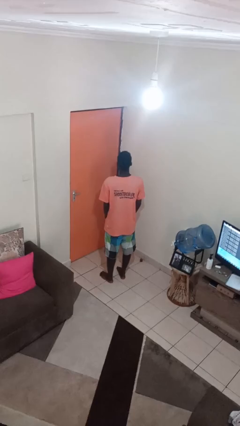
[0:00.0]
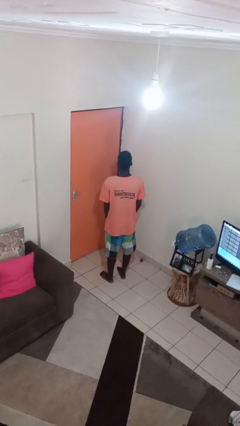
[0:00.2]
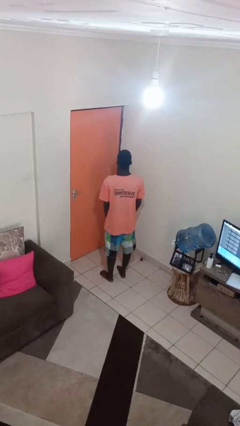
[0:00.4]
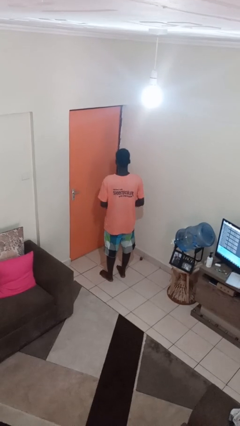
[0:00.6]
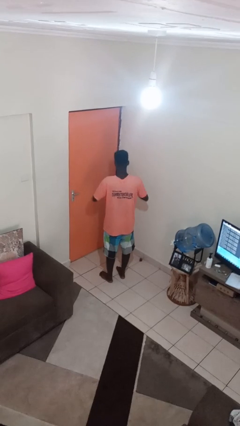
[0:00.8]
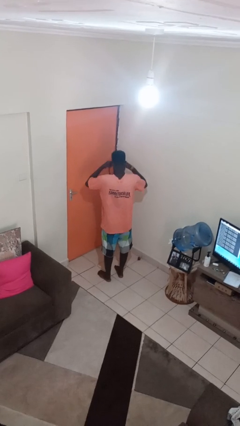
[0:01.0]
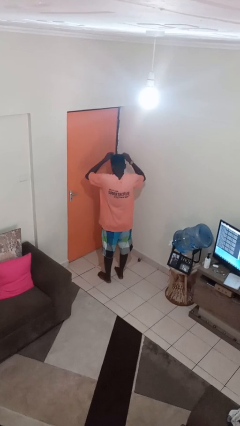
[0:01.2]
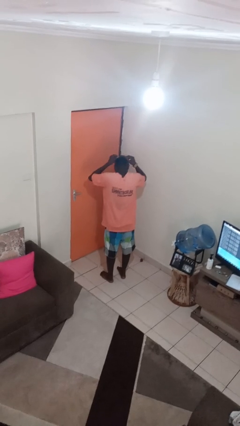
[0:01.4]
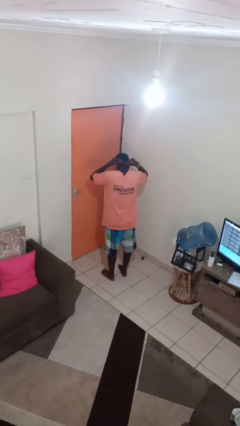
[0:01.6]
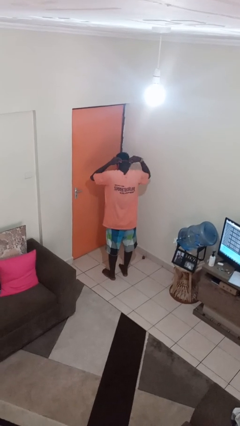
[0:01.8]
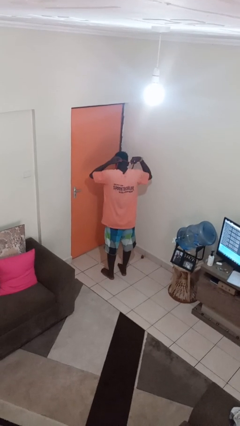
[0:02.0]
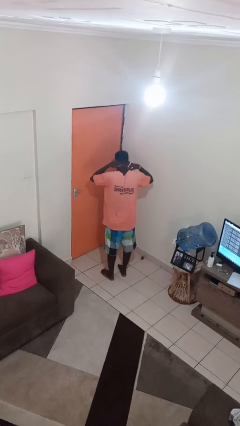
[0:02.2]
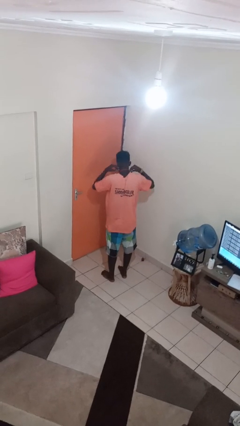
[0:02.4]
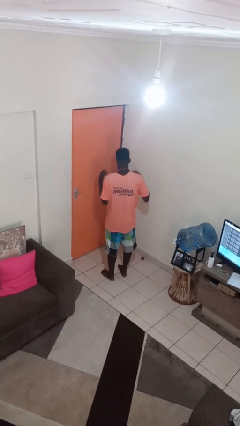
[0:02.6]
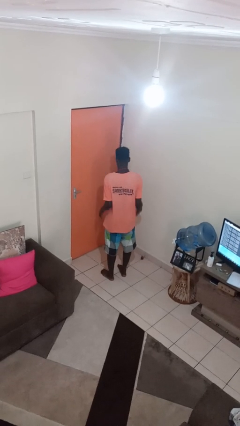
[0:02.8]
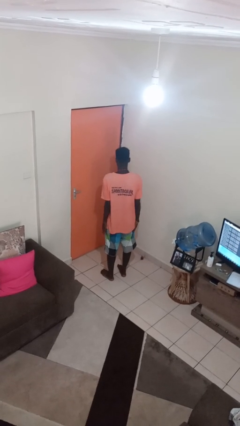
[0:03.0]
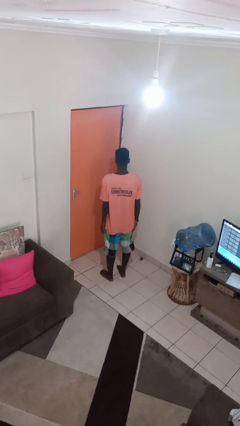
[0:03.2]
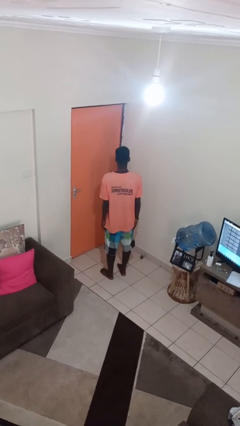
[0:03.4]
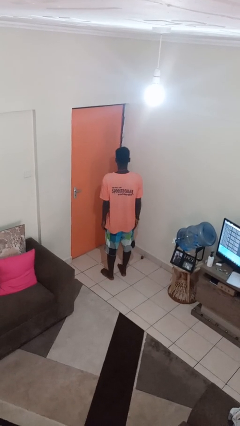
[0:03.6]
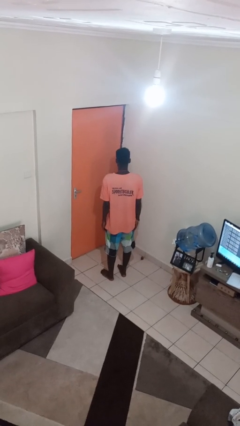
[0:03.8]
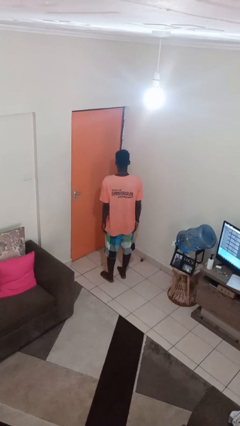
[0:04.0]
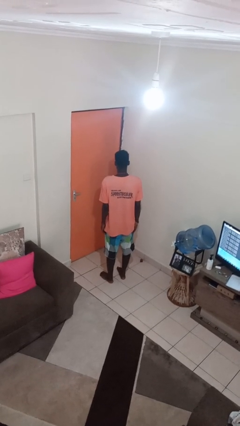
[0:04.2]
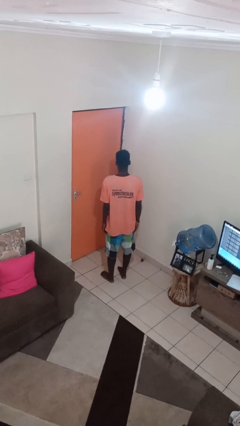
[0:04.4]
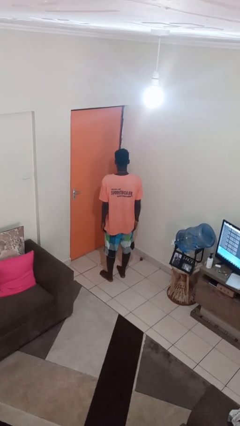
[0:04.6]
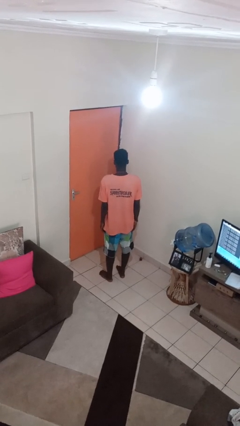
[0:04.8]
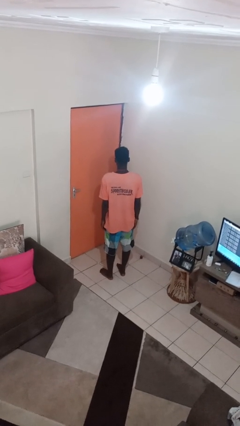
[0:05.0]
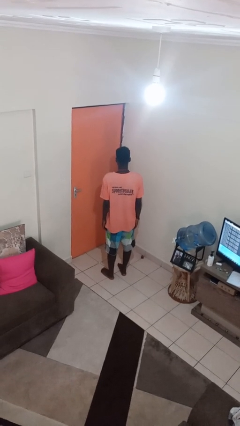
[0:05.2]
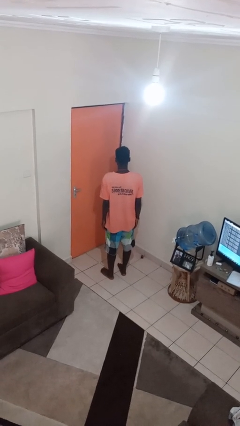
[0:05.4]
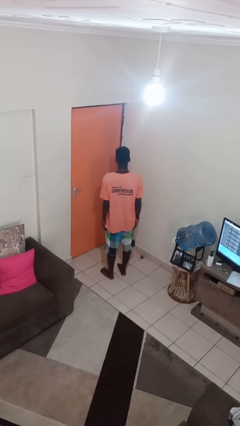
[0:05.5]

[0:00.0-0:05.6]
person puts on necklace

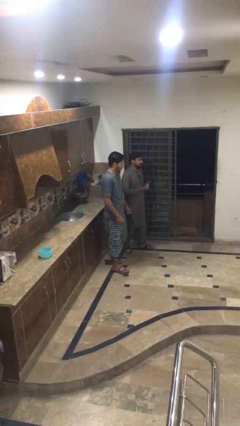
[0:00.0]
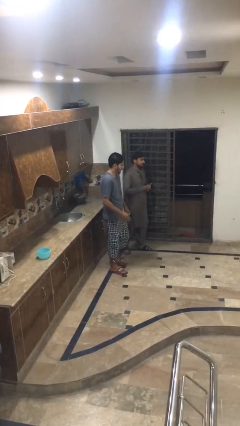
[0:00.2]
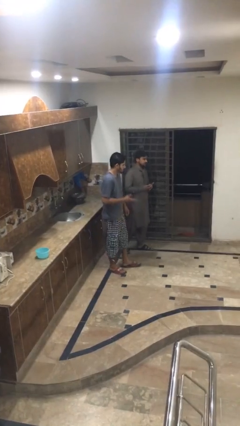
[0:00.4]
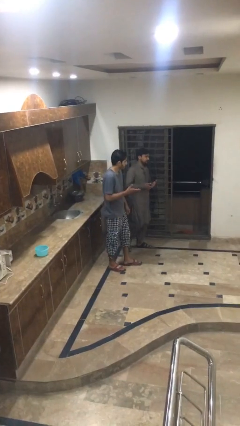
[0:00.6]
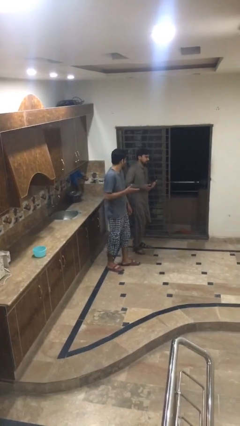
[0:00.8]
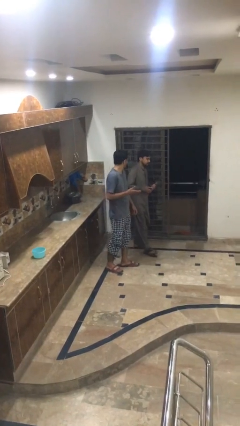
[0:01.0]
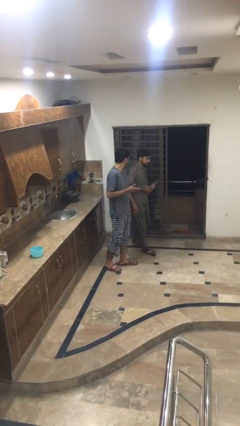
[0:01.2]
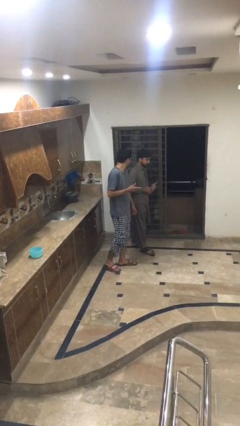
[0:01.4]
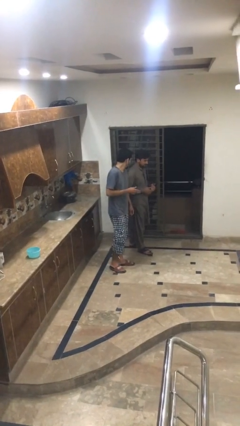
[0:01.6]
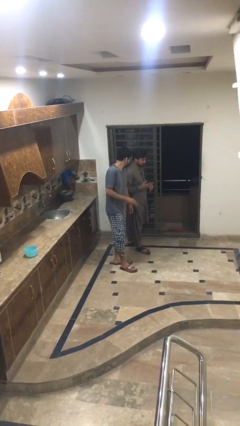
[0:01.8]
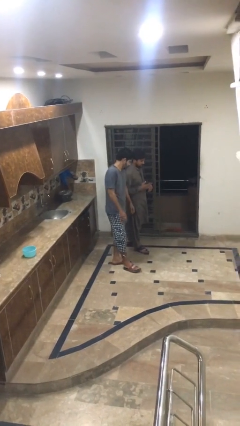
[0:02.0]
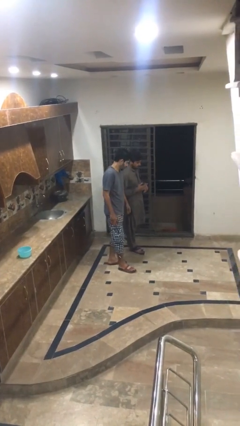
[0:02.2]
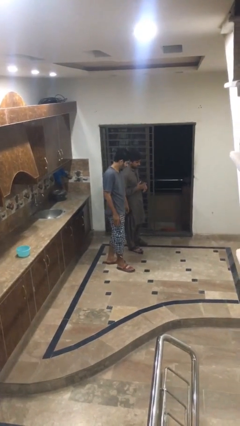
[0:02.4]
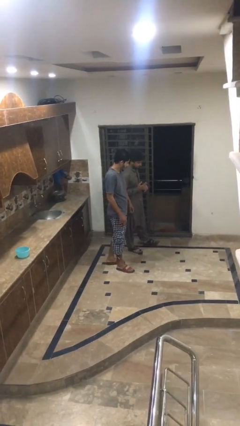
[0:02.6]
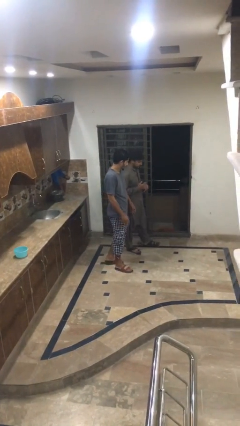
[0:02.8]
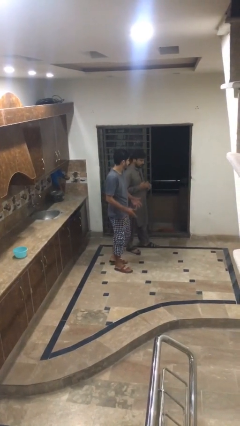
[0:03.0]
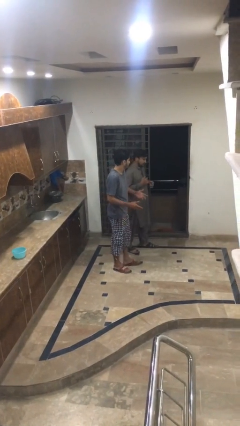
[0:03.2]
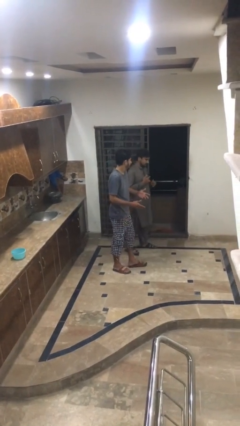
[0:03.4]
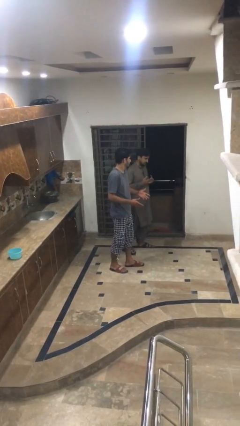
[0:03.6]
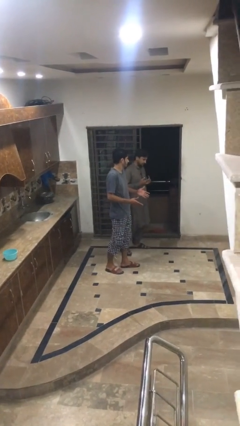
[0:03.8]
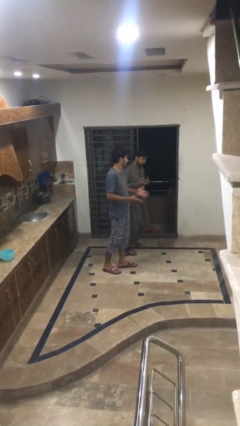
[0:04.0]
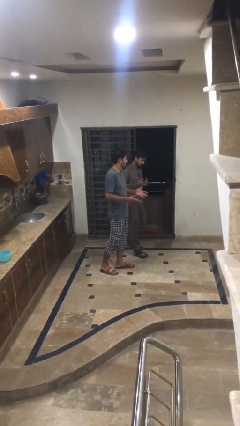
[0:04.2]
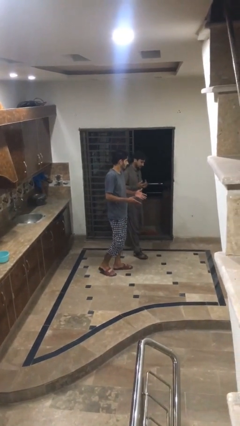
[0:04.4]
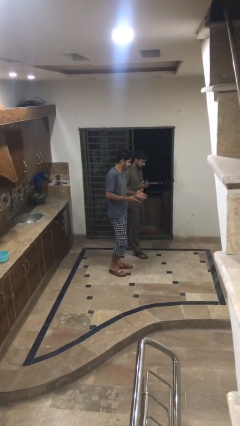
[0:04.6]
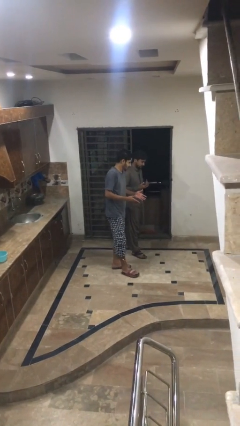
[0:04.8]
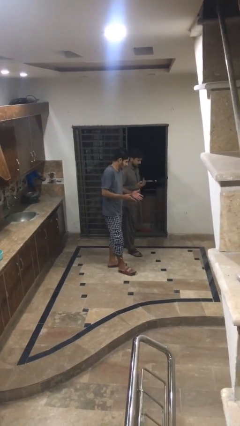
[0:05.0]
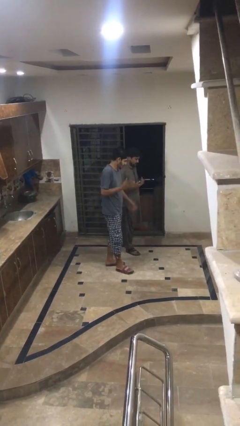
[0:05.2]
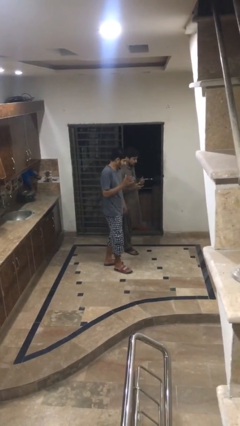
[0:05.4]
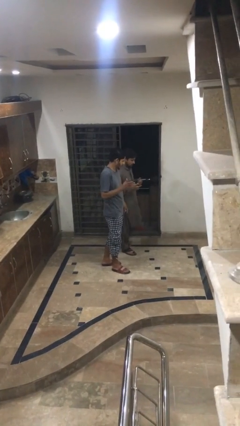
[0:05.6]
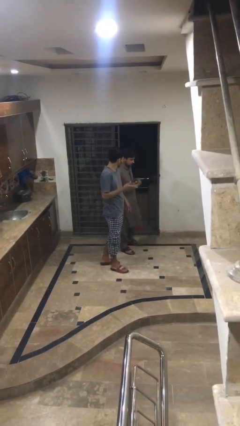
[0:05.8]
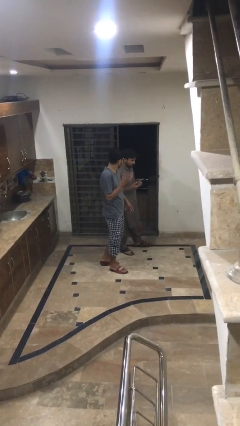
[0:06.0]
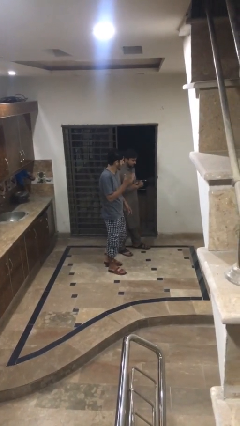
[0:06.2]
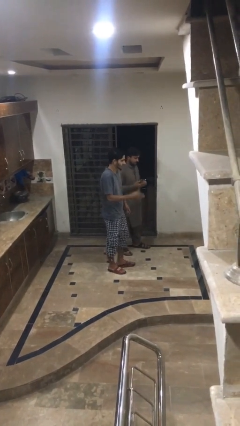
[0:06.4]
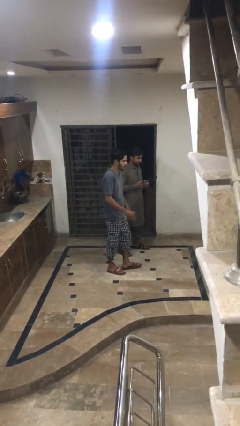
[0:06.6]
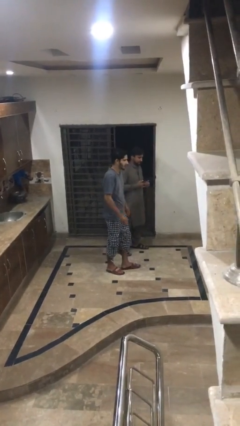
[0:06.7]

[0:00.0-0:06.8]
person talks to person

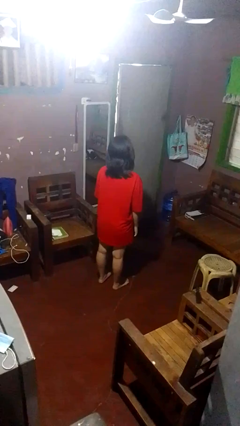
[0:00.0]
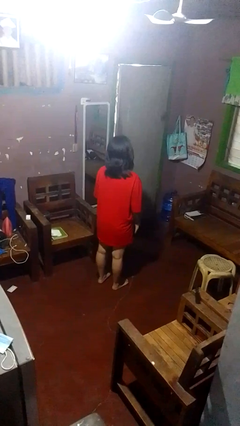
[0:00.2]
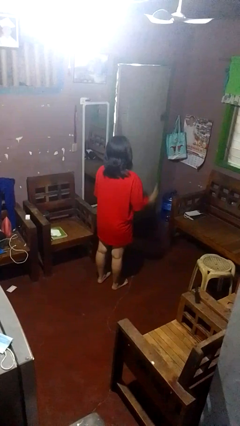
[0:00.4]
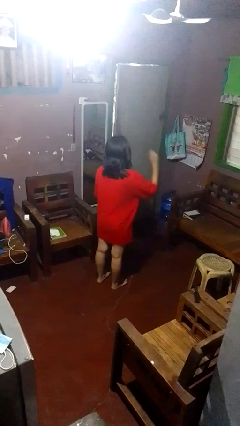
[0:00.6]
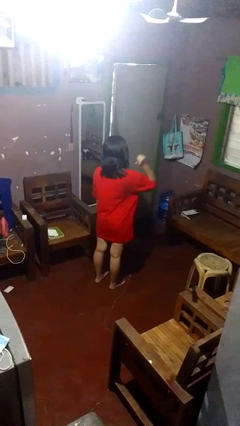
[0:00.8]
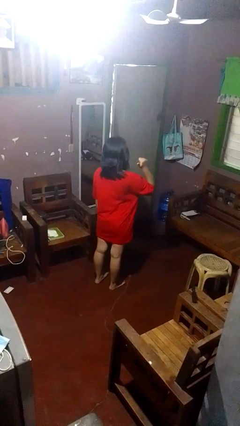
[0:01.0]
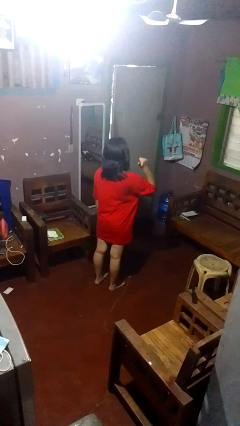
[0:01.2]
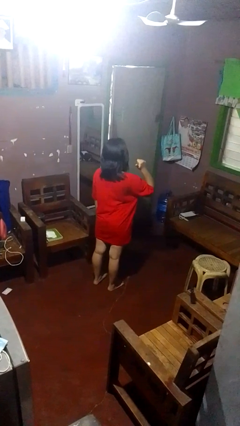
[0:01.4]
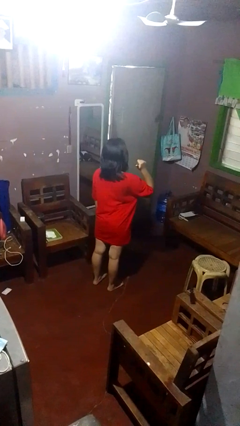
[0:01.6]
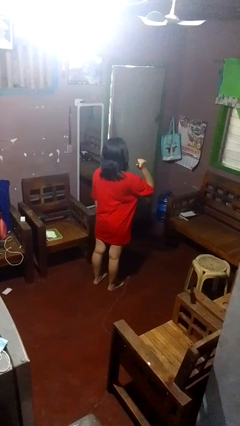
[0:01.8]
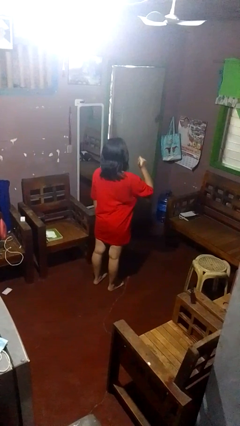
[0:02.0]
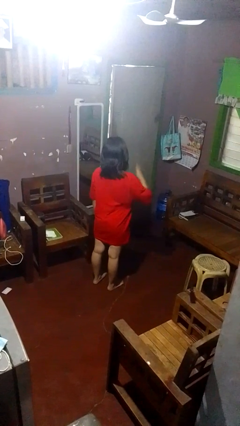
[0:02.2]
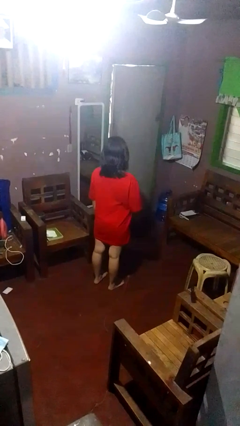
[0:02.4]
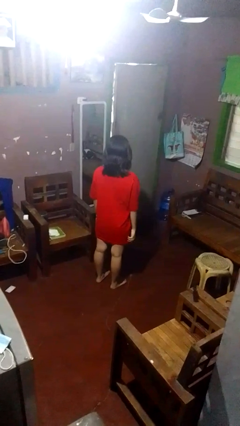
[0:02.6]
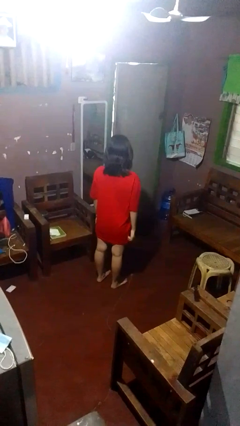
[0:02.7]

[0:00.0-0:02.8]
person gestures behind me

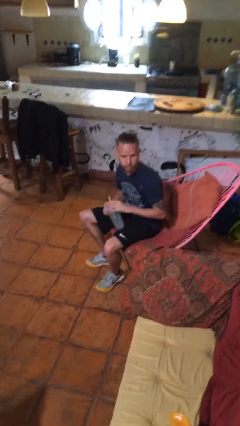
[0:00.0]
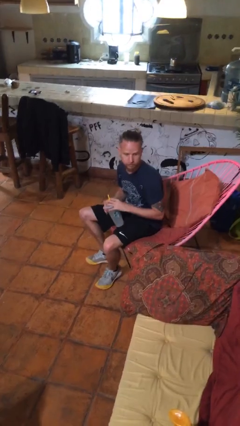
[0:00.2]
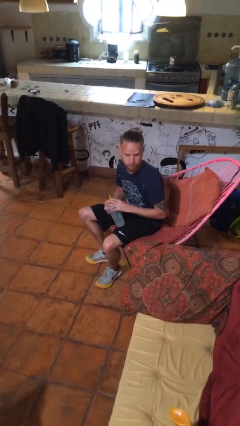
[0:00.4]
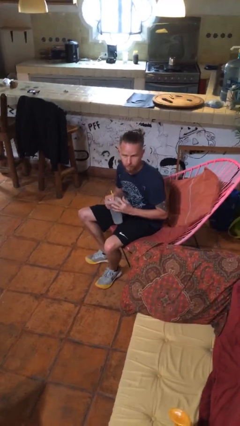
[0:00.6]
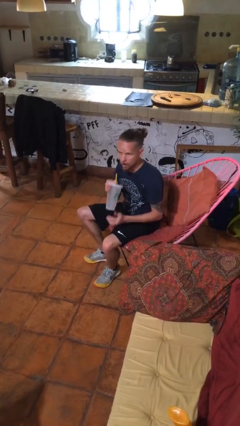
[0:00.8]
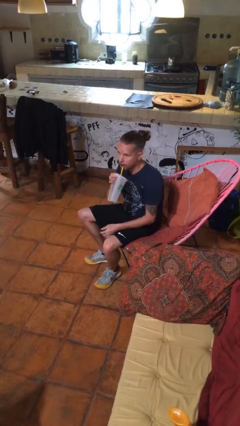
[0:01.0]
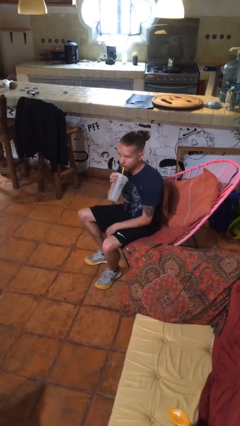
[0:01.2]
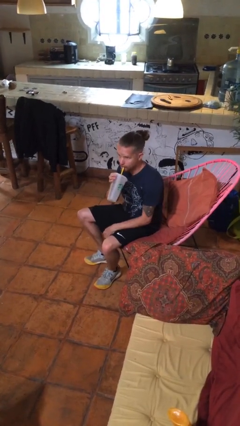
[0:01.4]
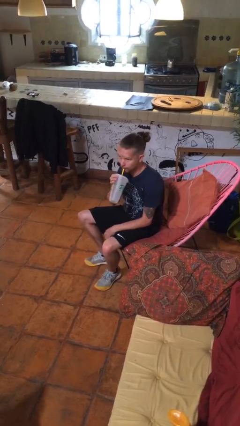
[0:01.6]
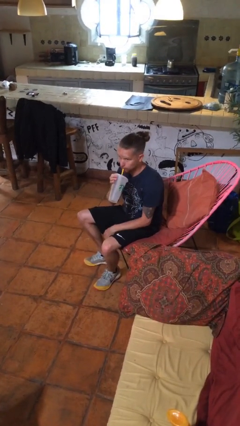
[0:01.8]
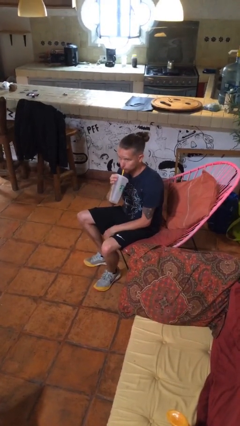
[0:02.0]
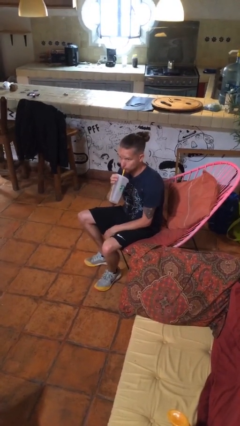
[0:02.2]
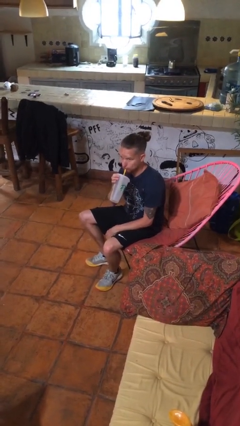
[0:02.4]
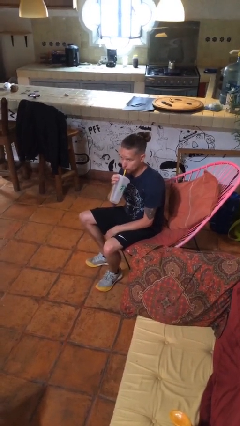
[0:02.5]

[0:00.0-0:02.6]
person drinks from straw
